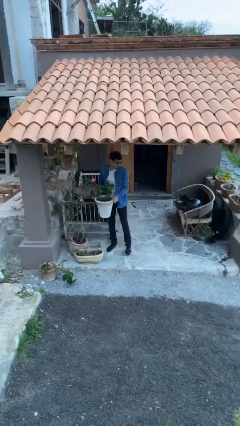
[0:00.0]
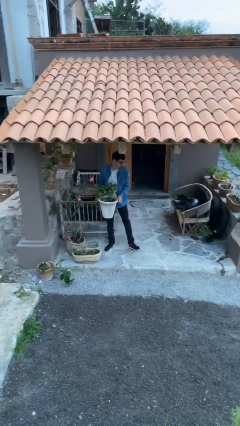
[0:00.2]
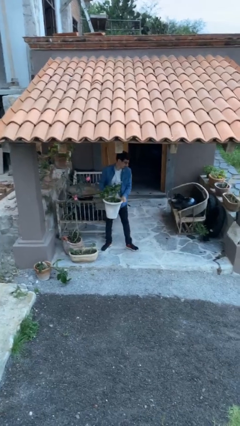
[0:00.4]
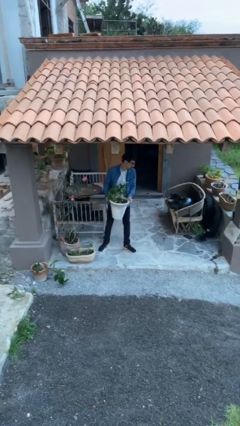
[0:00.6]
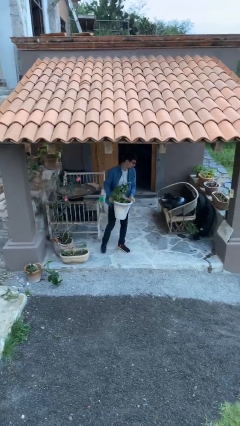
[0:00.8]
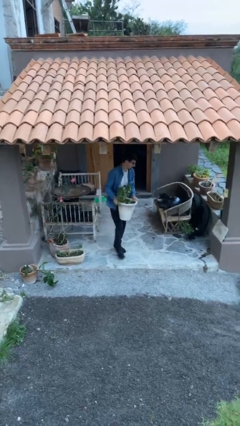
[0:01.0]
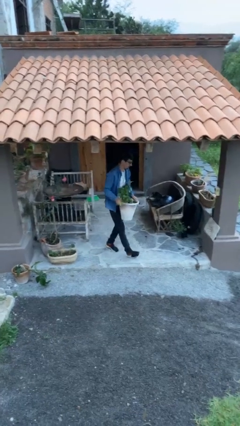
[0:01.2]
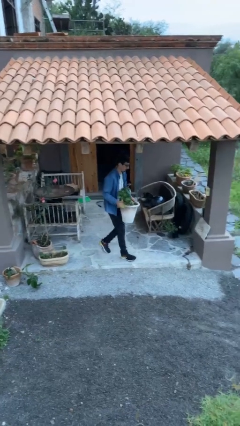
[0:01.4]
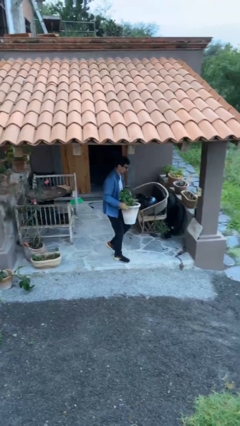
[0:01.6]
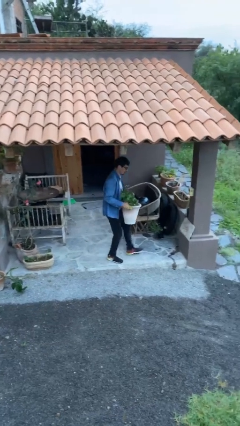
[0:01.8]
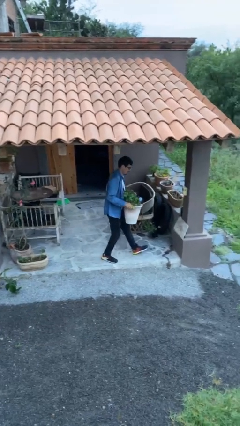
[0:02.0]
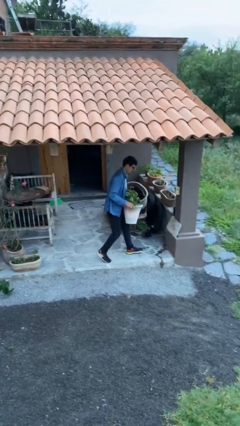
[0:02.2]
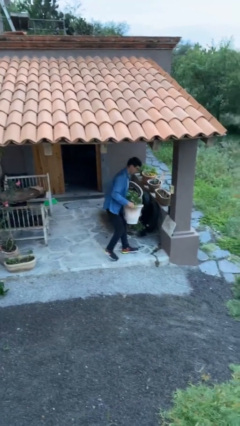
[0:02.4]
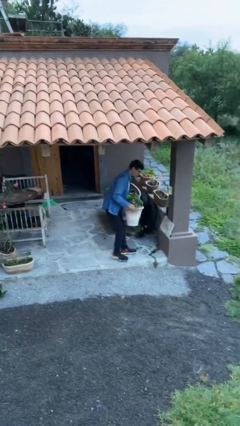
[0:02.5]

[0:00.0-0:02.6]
person carries heavy object

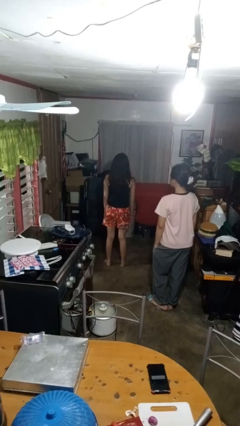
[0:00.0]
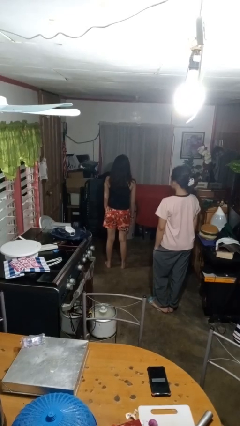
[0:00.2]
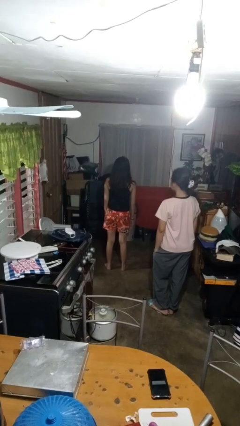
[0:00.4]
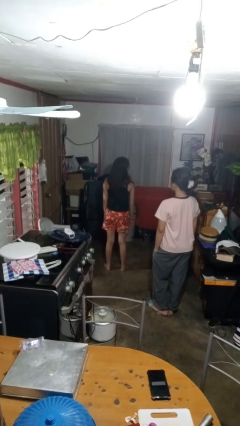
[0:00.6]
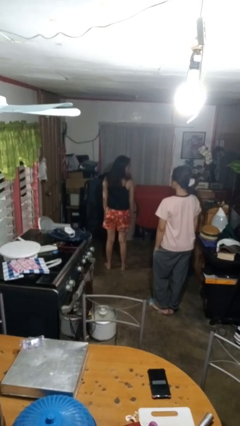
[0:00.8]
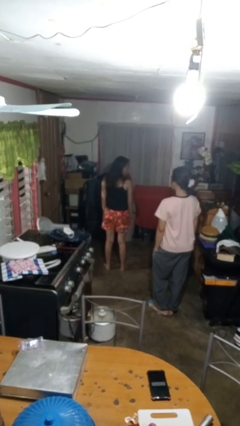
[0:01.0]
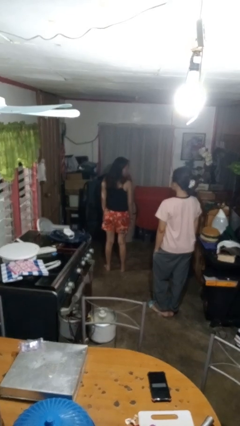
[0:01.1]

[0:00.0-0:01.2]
person looks over shoulder

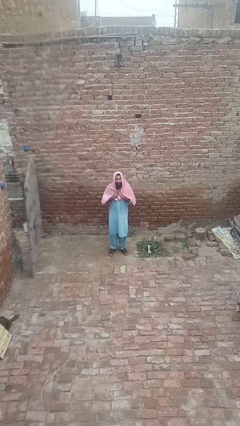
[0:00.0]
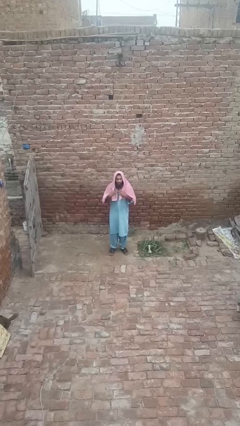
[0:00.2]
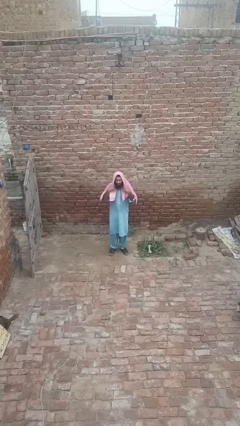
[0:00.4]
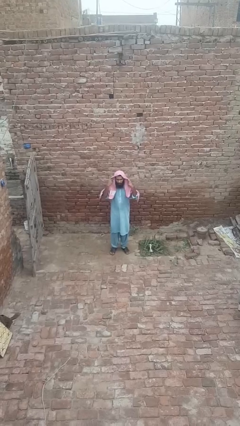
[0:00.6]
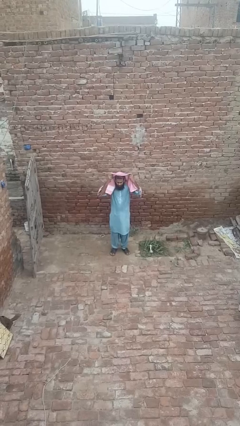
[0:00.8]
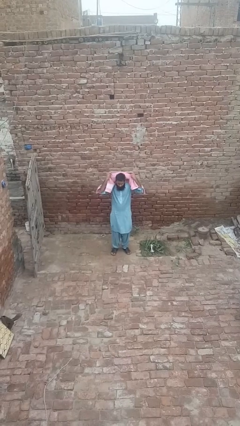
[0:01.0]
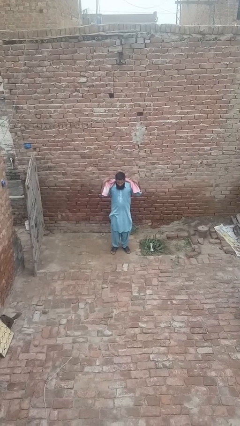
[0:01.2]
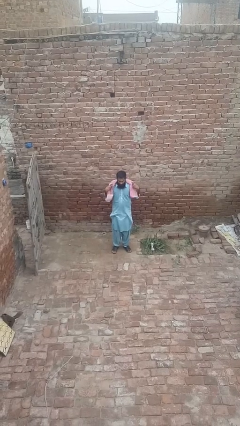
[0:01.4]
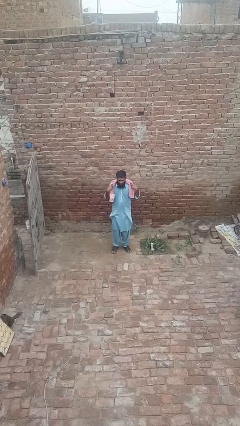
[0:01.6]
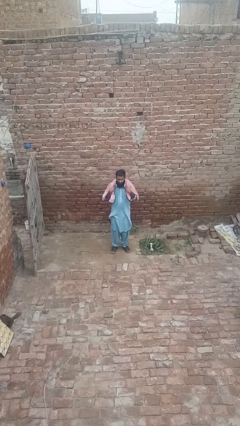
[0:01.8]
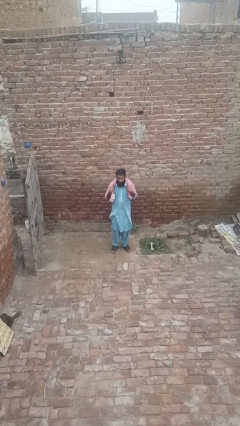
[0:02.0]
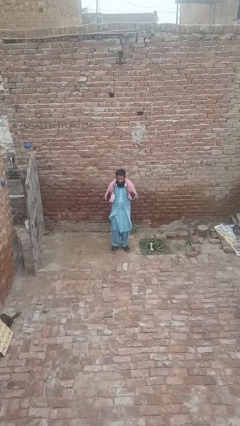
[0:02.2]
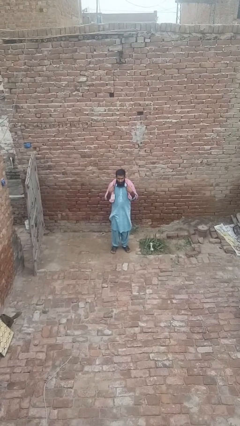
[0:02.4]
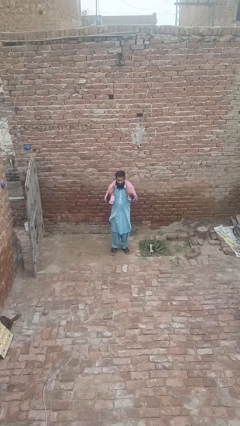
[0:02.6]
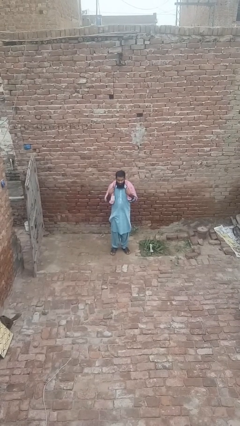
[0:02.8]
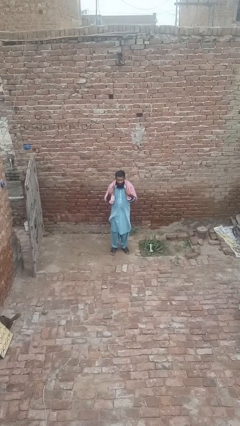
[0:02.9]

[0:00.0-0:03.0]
person takes off hoodie

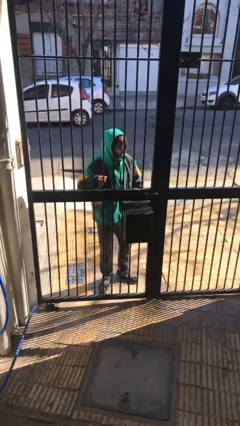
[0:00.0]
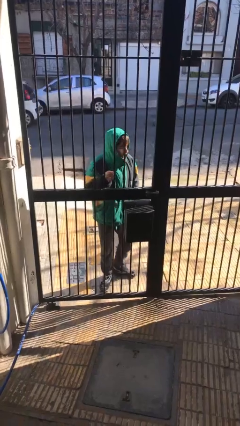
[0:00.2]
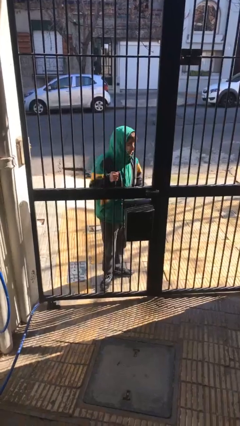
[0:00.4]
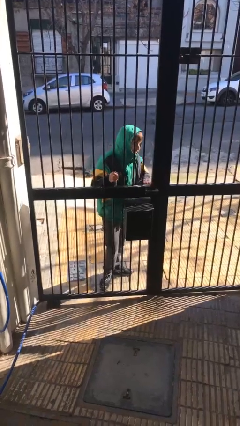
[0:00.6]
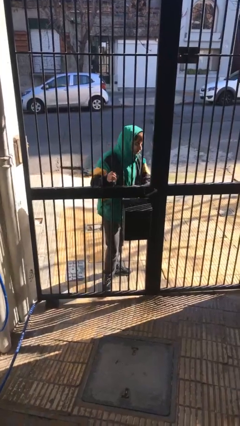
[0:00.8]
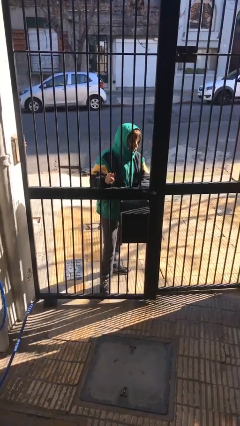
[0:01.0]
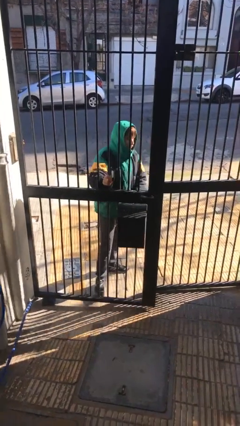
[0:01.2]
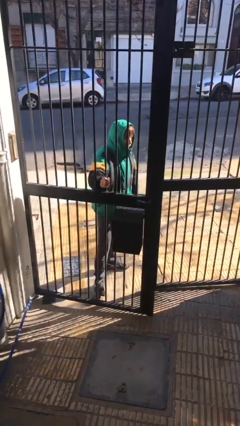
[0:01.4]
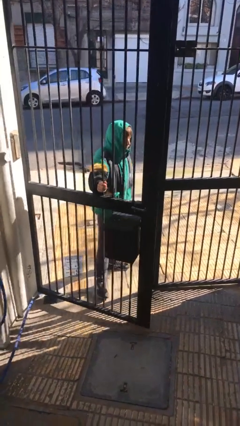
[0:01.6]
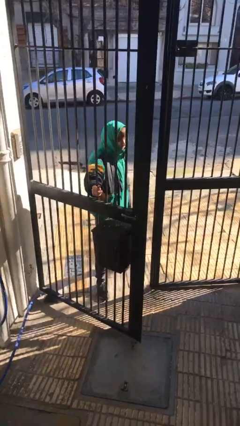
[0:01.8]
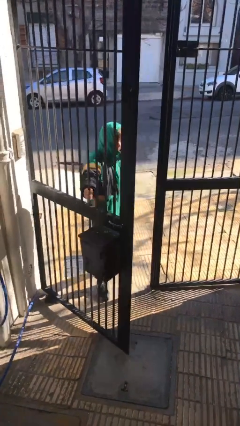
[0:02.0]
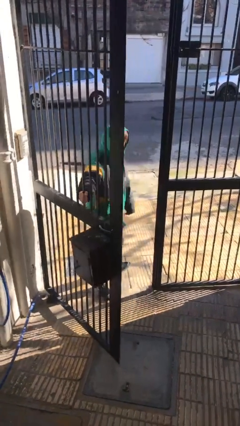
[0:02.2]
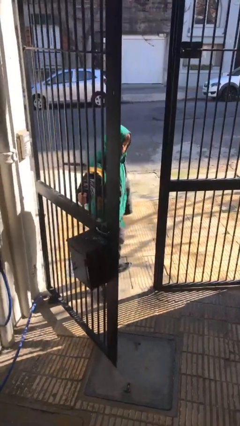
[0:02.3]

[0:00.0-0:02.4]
person opens gate

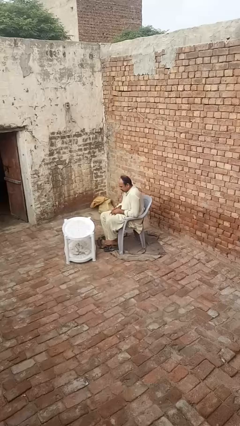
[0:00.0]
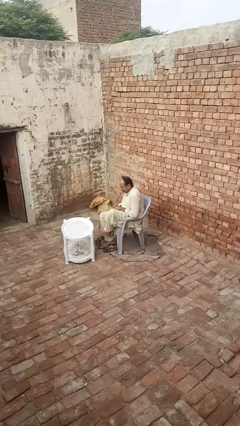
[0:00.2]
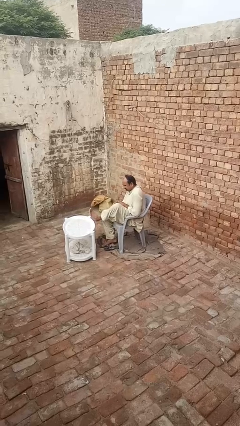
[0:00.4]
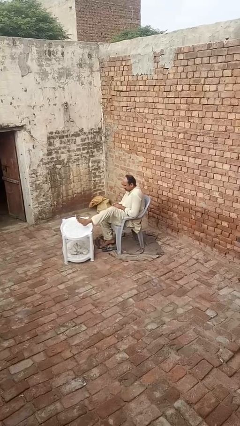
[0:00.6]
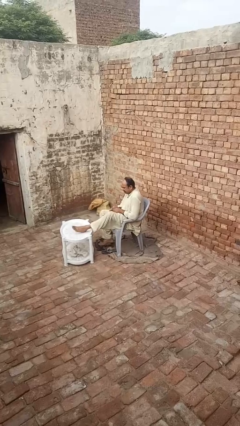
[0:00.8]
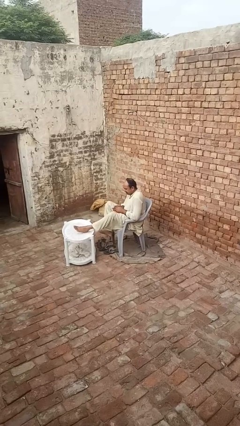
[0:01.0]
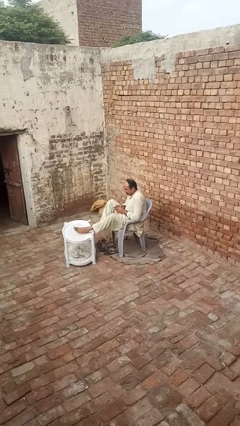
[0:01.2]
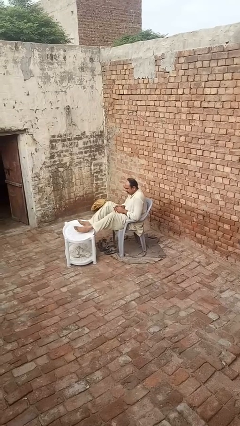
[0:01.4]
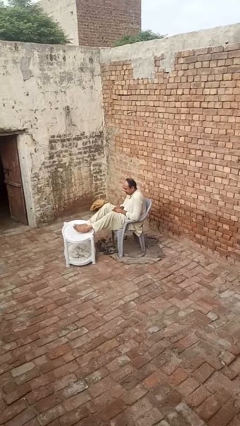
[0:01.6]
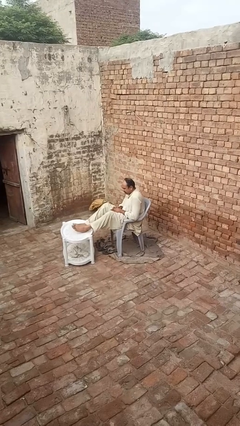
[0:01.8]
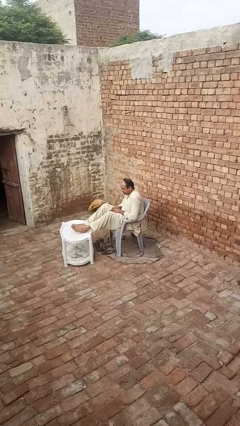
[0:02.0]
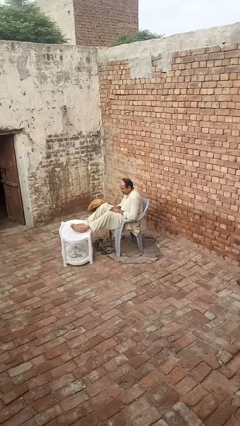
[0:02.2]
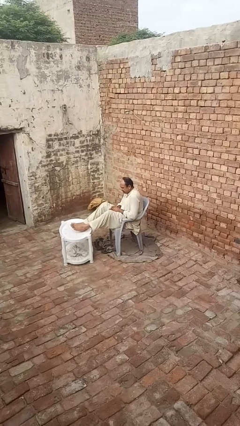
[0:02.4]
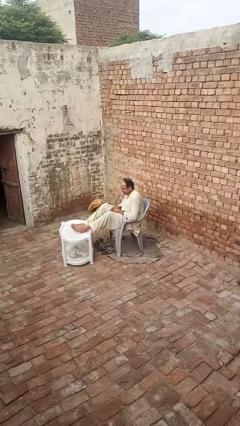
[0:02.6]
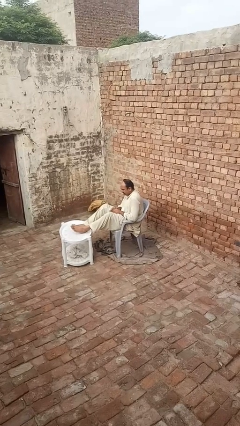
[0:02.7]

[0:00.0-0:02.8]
person puts feet up

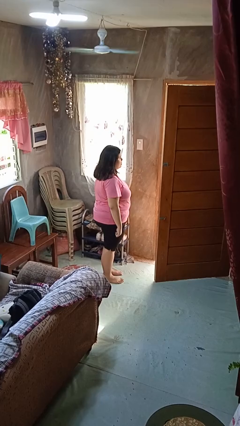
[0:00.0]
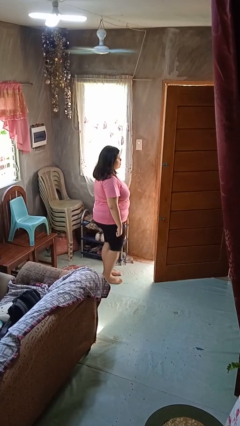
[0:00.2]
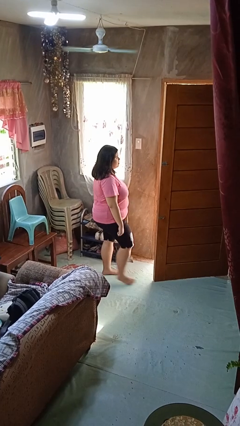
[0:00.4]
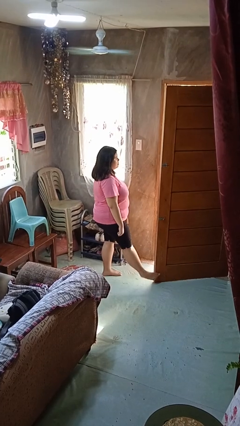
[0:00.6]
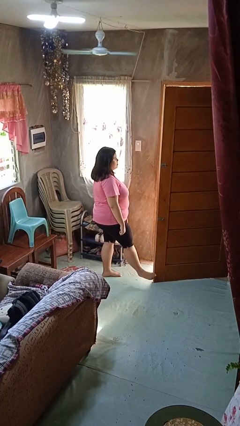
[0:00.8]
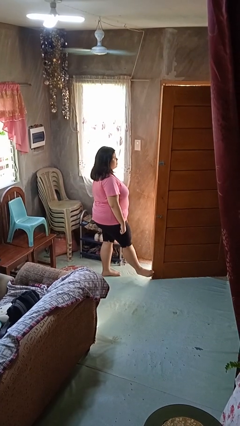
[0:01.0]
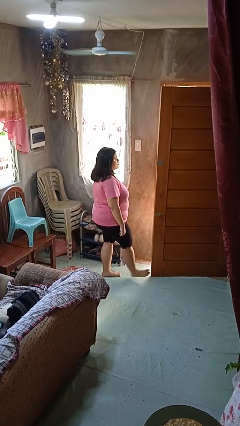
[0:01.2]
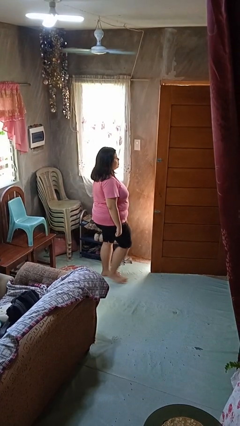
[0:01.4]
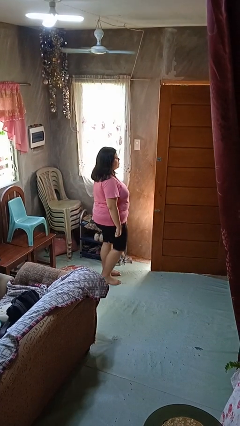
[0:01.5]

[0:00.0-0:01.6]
person closes door with foot

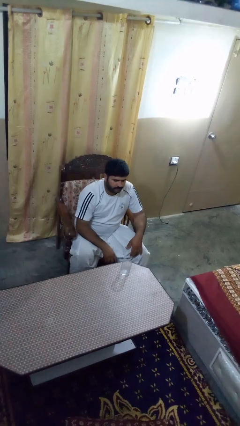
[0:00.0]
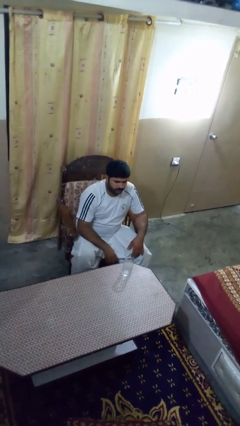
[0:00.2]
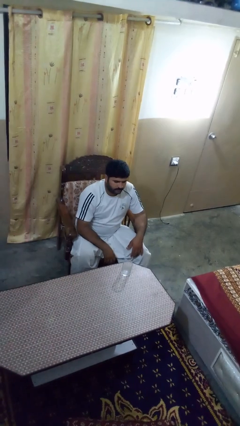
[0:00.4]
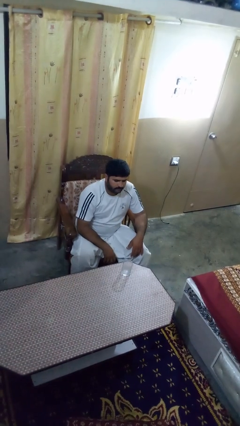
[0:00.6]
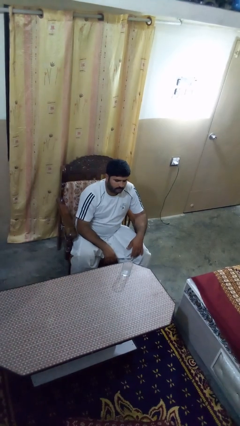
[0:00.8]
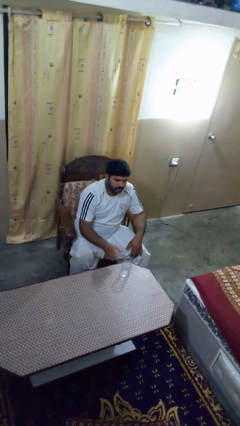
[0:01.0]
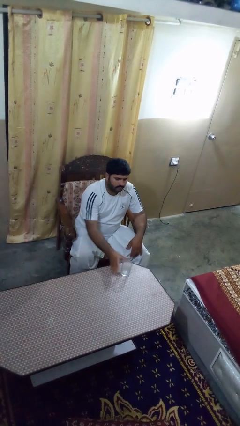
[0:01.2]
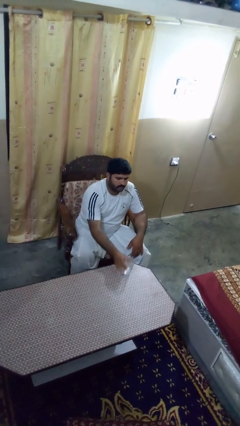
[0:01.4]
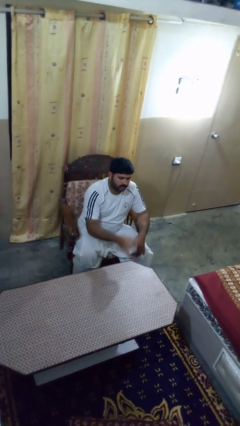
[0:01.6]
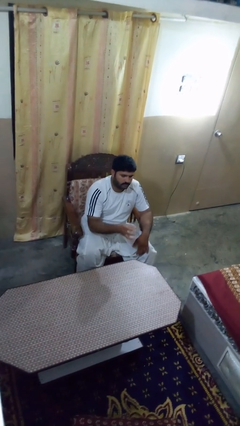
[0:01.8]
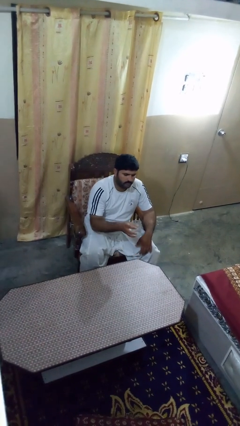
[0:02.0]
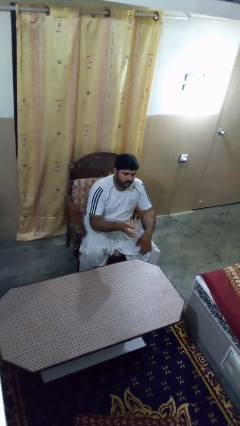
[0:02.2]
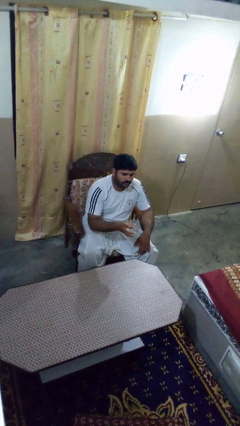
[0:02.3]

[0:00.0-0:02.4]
person picks up object from table

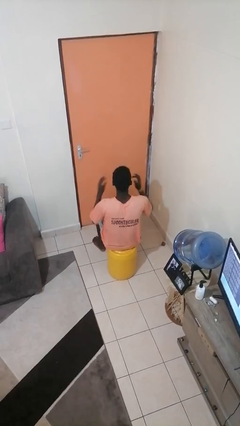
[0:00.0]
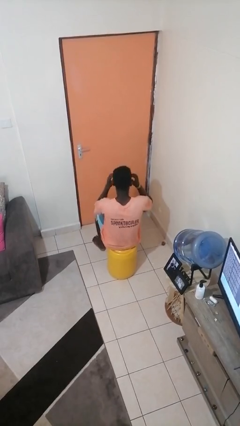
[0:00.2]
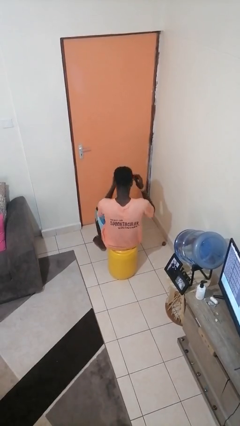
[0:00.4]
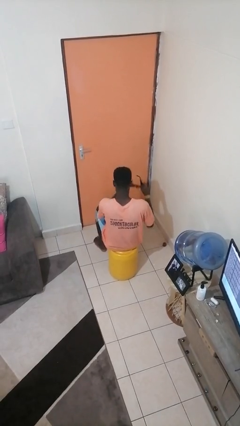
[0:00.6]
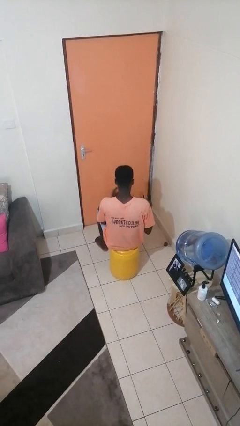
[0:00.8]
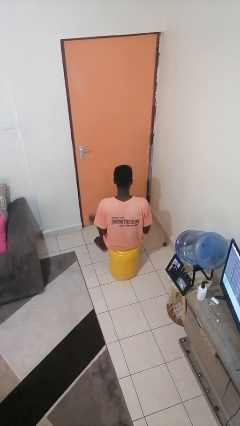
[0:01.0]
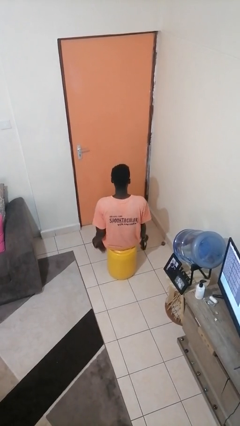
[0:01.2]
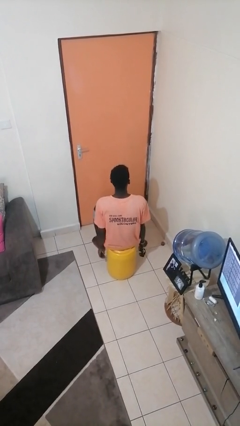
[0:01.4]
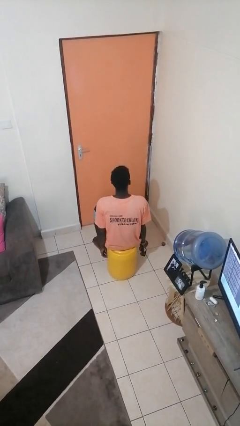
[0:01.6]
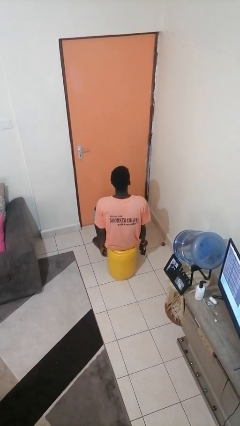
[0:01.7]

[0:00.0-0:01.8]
person takes off sunglasses
